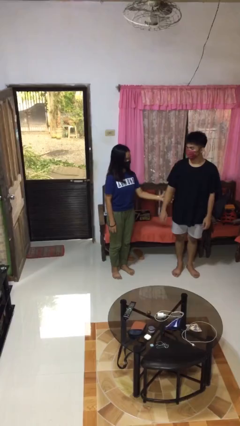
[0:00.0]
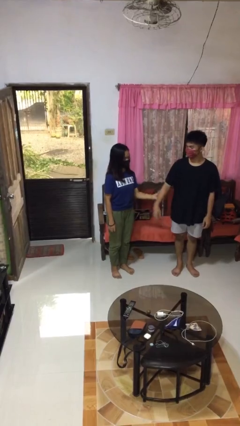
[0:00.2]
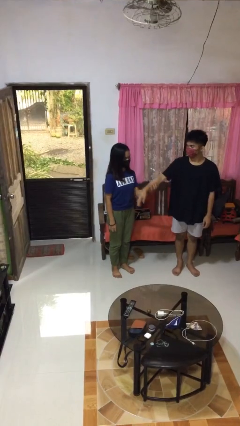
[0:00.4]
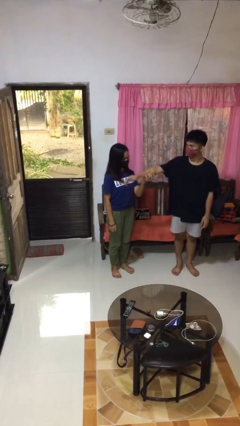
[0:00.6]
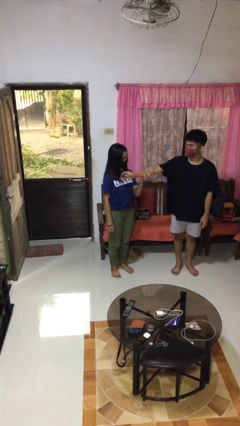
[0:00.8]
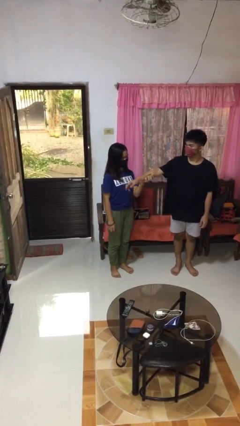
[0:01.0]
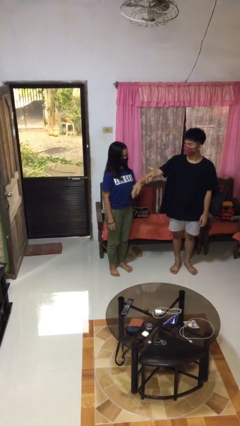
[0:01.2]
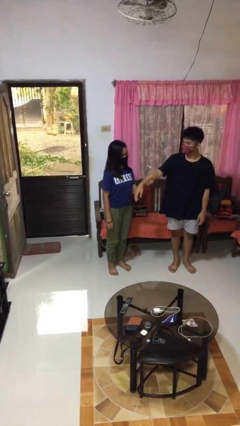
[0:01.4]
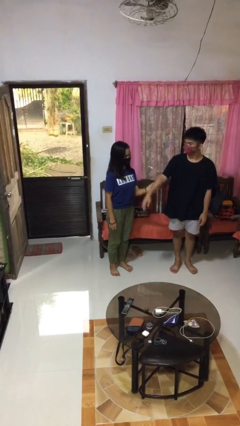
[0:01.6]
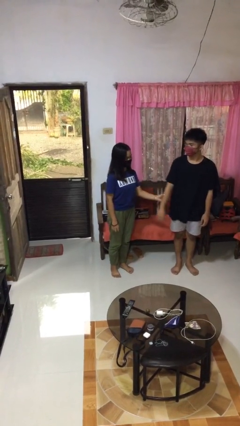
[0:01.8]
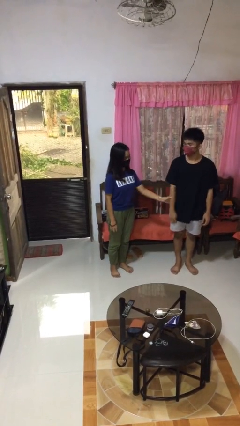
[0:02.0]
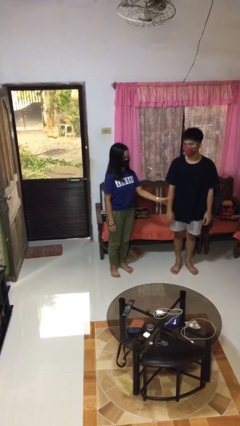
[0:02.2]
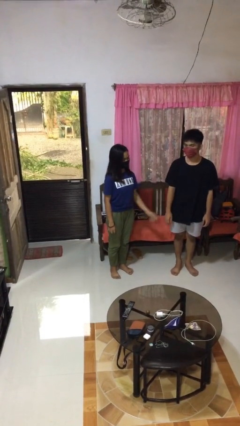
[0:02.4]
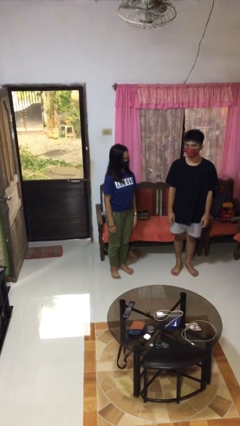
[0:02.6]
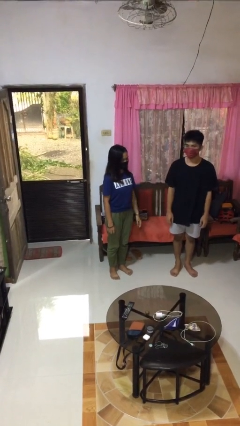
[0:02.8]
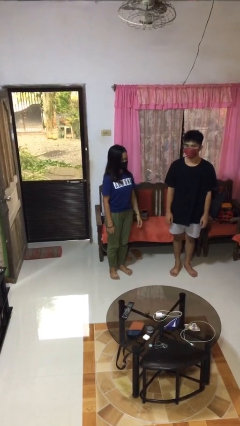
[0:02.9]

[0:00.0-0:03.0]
person grabs person by forearm

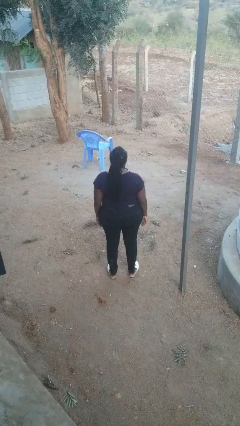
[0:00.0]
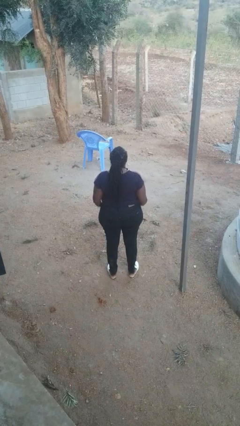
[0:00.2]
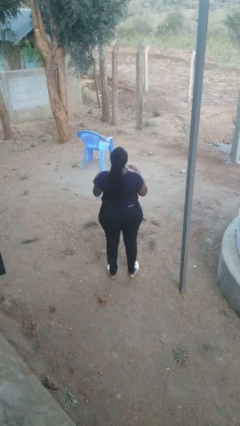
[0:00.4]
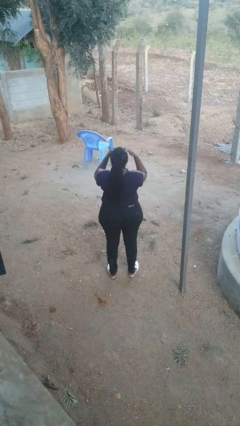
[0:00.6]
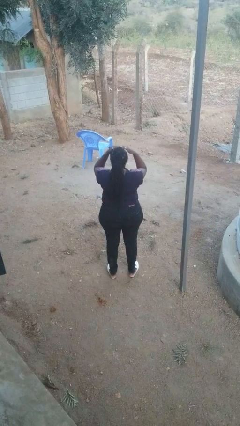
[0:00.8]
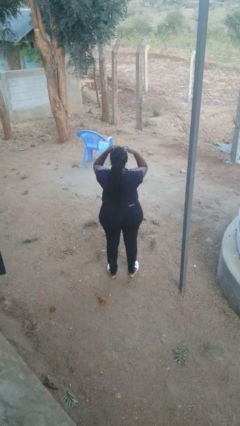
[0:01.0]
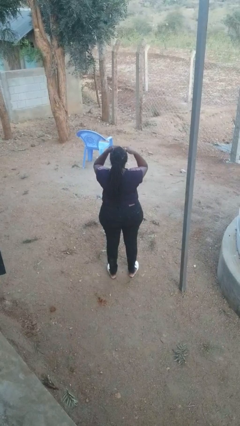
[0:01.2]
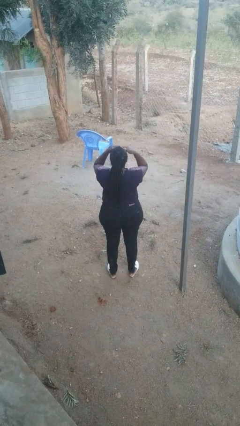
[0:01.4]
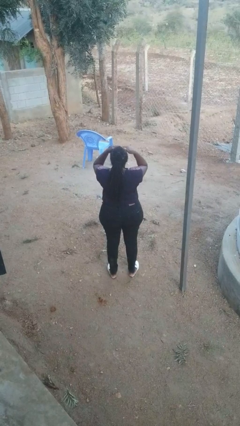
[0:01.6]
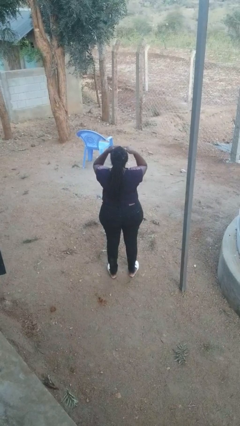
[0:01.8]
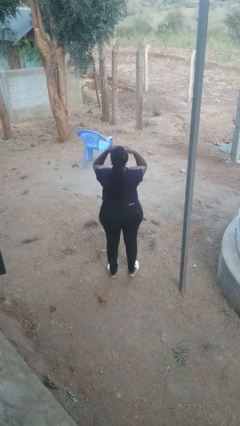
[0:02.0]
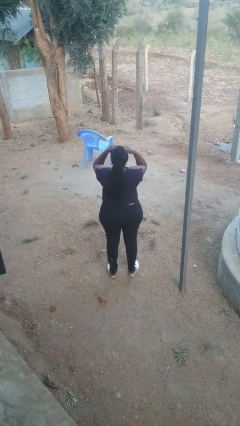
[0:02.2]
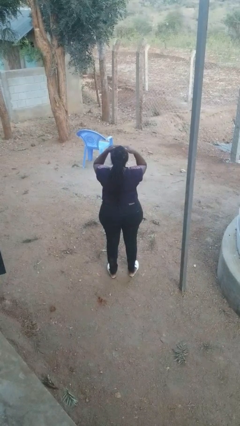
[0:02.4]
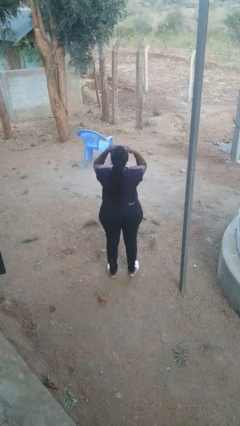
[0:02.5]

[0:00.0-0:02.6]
person shades eyes

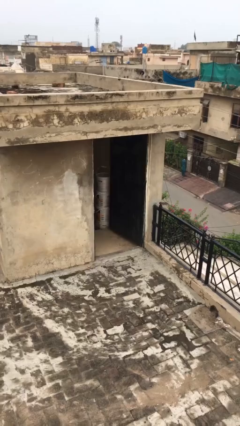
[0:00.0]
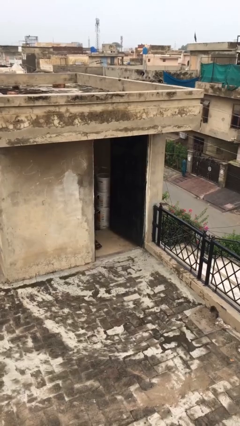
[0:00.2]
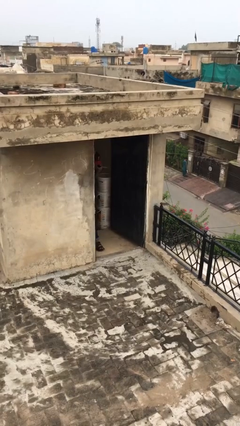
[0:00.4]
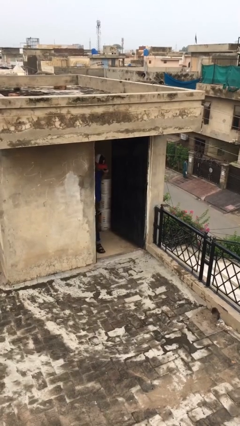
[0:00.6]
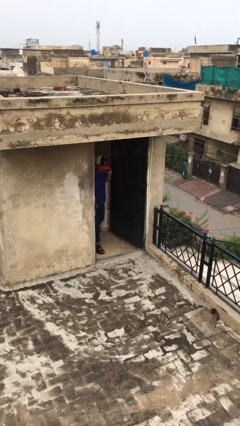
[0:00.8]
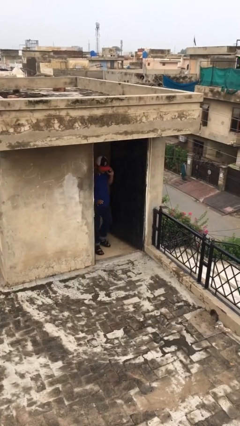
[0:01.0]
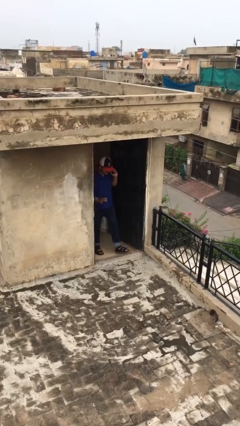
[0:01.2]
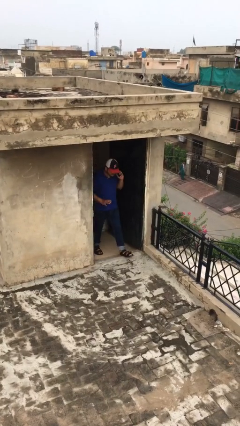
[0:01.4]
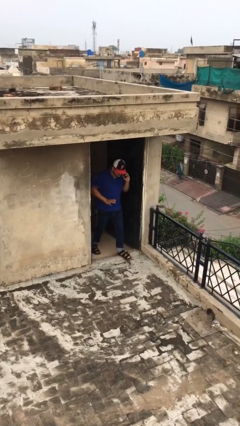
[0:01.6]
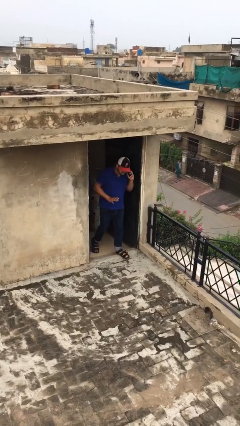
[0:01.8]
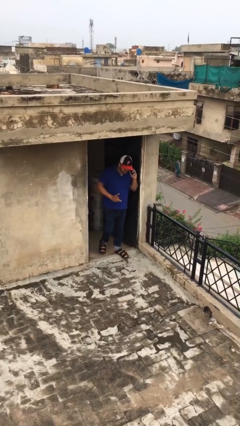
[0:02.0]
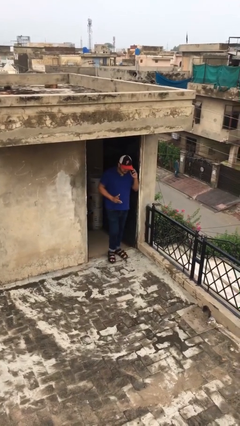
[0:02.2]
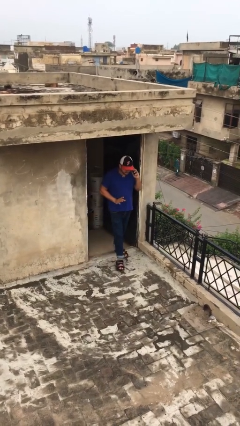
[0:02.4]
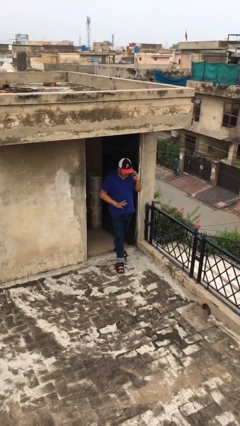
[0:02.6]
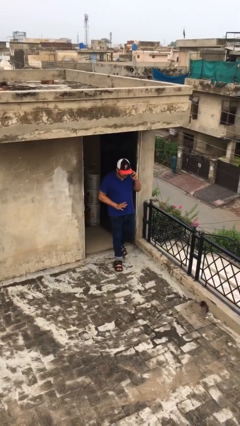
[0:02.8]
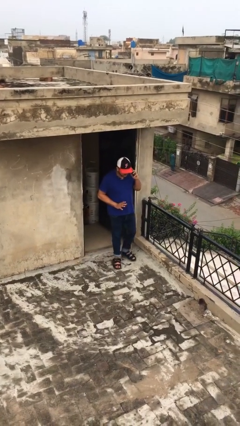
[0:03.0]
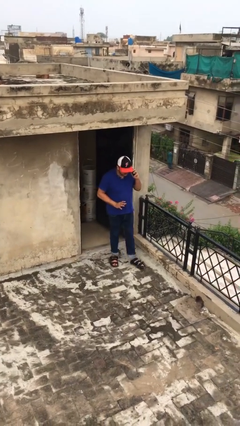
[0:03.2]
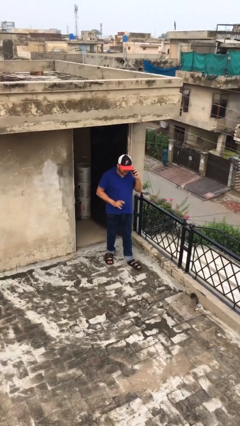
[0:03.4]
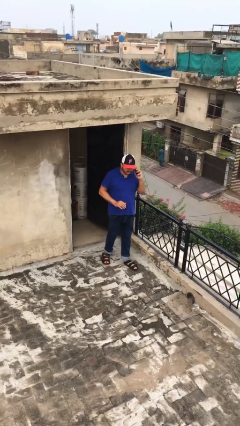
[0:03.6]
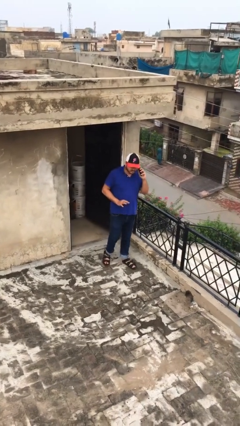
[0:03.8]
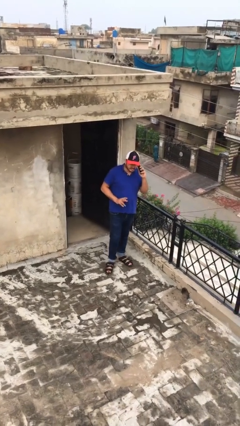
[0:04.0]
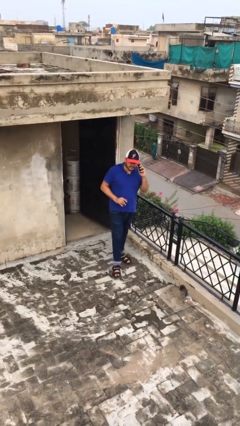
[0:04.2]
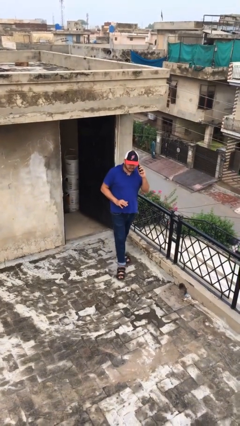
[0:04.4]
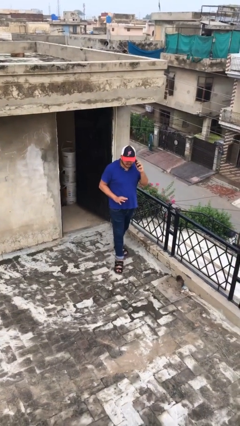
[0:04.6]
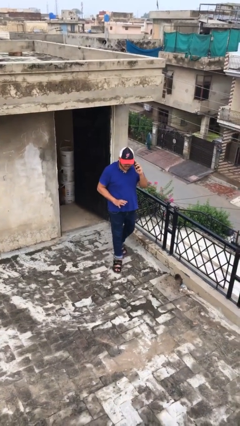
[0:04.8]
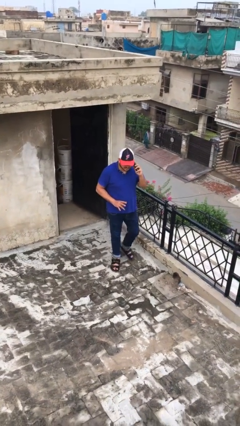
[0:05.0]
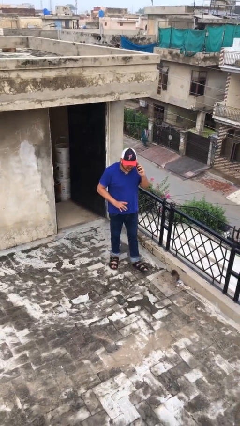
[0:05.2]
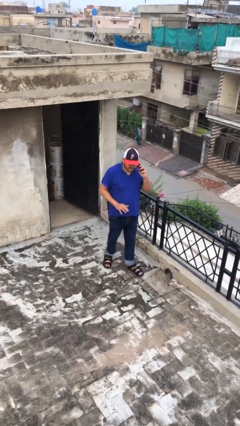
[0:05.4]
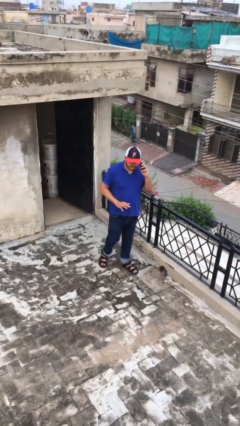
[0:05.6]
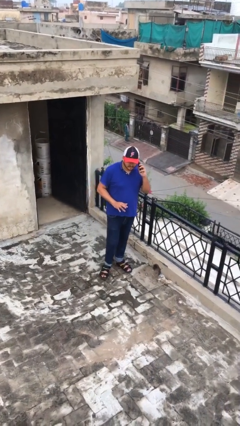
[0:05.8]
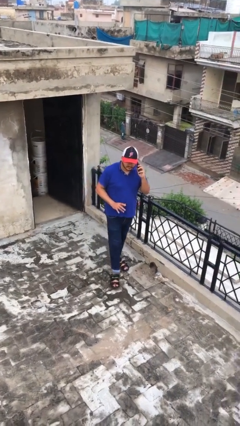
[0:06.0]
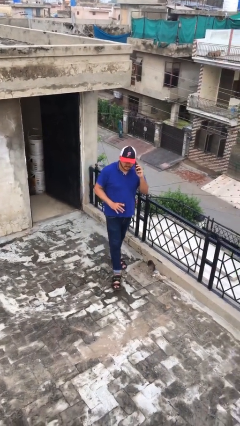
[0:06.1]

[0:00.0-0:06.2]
person enters scene through structure

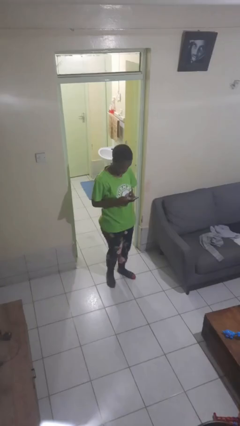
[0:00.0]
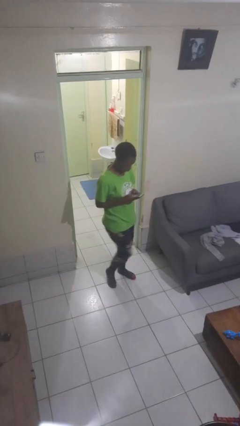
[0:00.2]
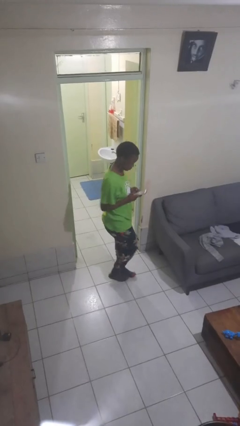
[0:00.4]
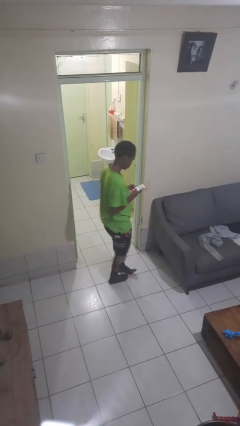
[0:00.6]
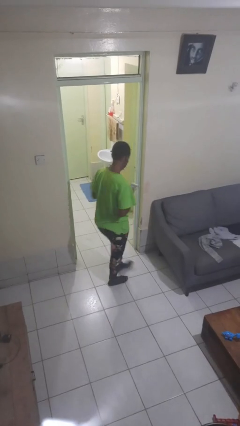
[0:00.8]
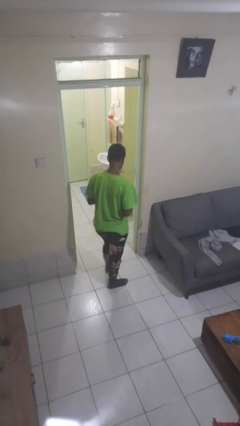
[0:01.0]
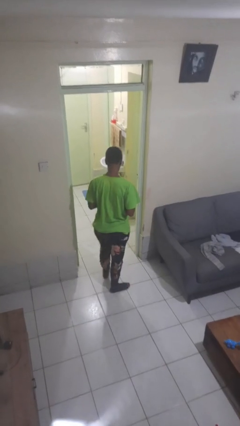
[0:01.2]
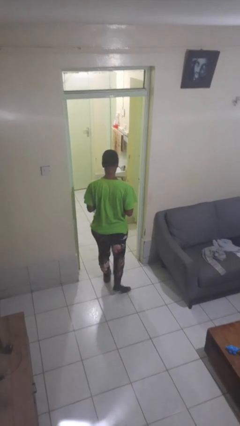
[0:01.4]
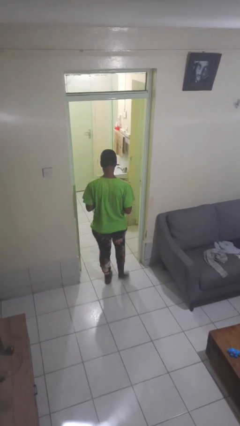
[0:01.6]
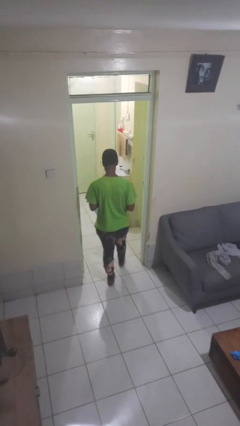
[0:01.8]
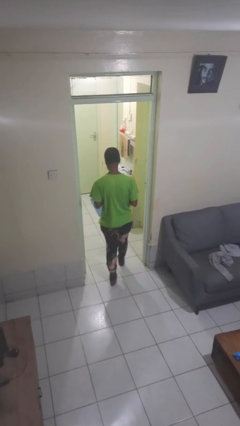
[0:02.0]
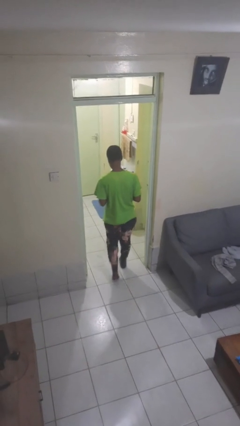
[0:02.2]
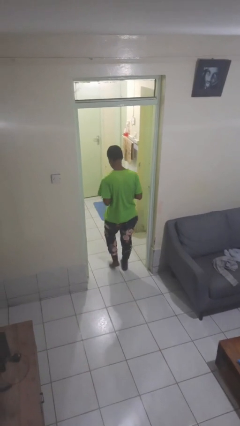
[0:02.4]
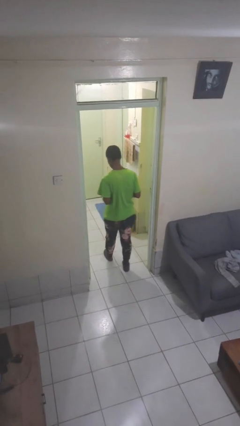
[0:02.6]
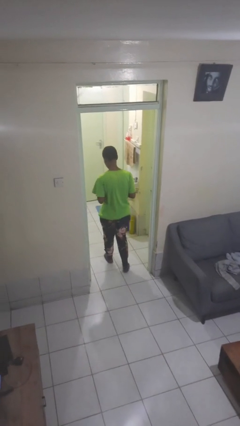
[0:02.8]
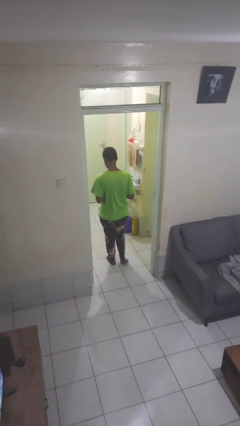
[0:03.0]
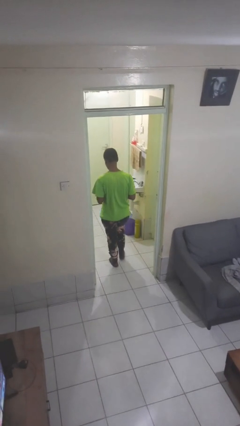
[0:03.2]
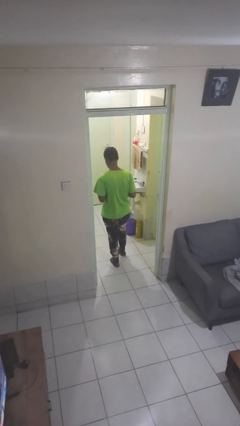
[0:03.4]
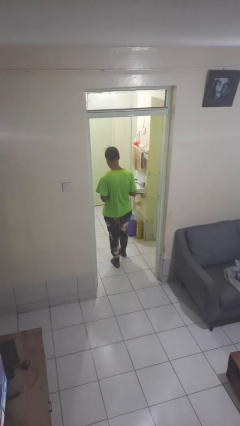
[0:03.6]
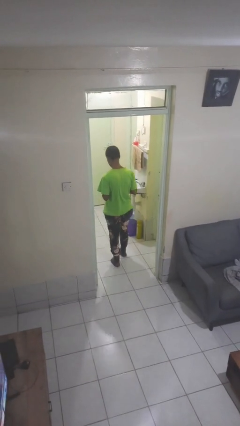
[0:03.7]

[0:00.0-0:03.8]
person exits scene through structure

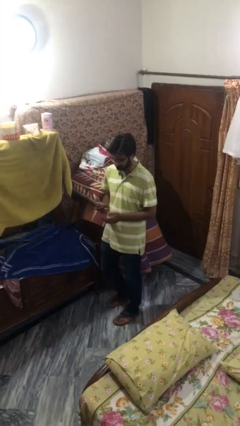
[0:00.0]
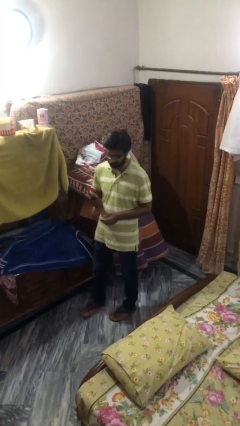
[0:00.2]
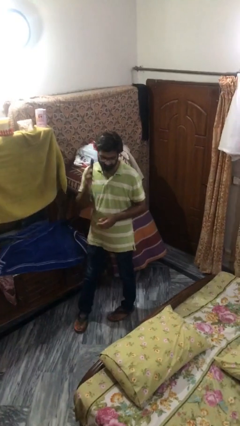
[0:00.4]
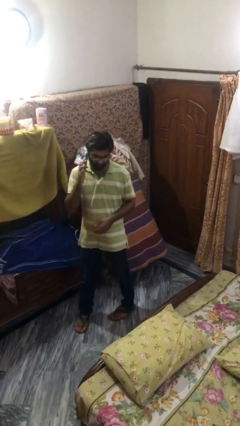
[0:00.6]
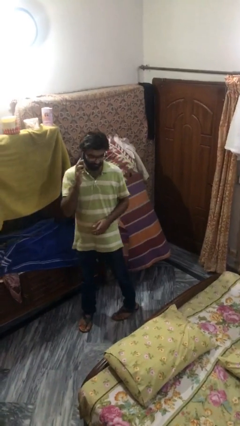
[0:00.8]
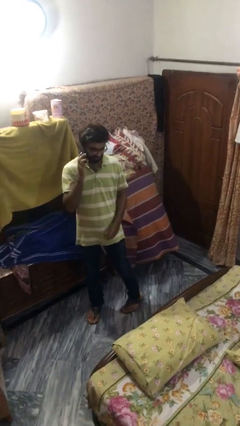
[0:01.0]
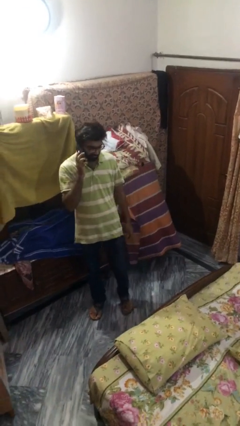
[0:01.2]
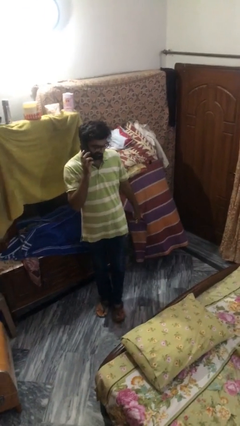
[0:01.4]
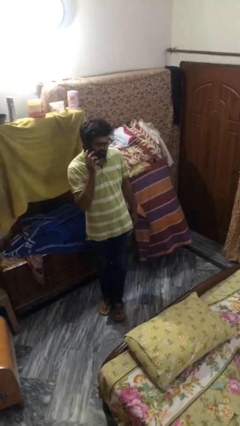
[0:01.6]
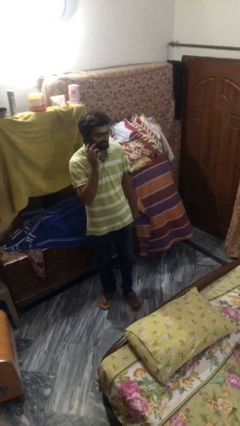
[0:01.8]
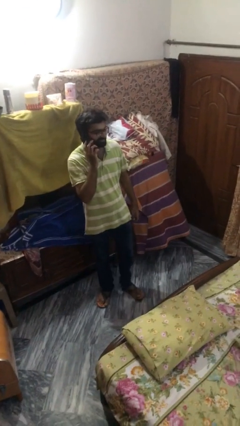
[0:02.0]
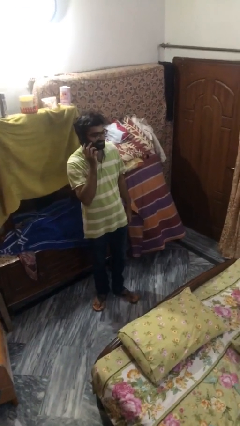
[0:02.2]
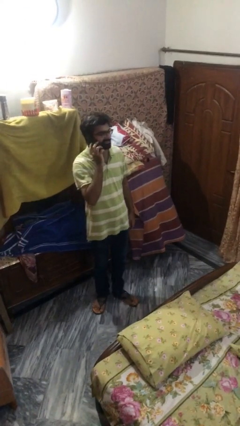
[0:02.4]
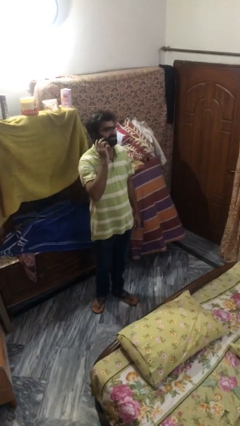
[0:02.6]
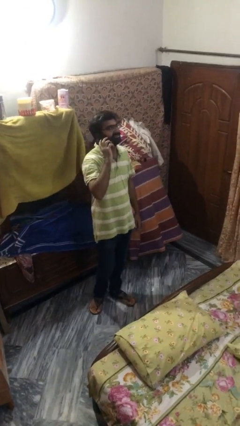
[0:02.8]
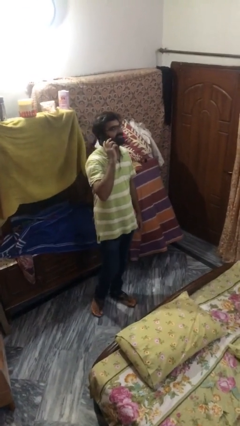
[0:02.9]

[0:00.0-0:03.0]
person talks on phone
